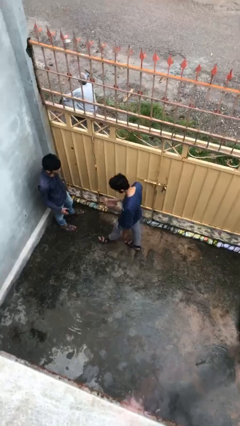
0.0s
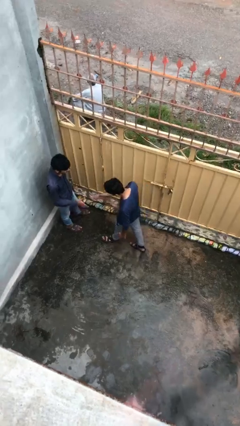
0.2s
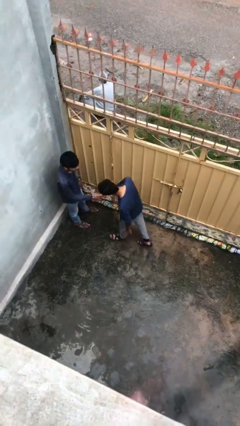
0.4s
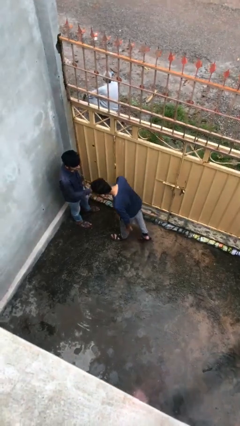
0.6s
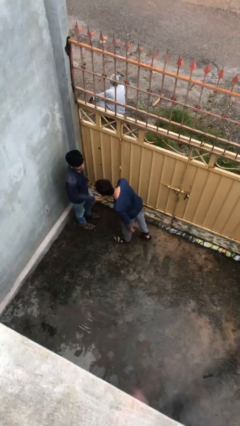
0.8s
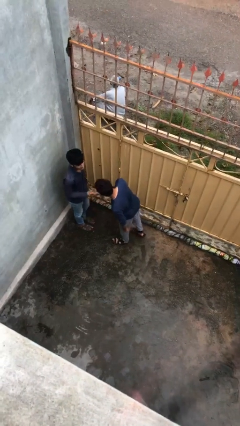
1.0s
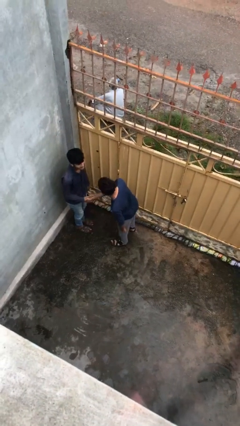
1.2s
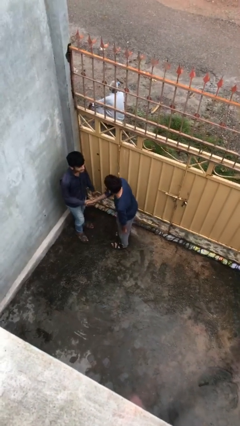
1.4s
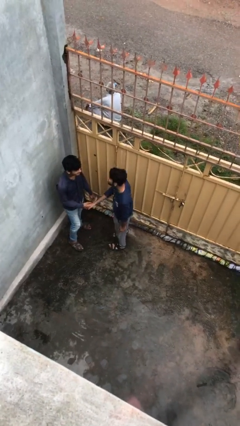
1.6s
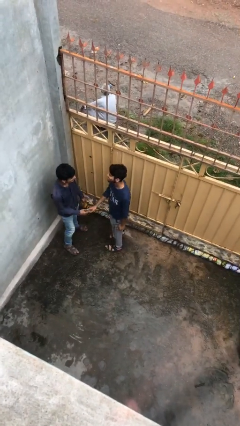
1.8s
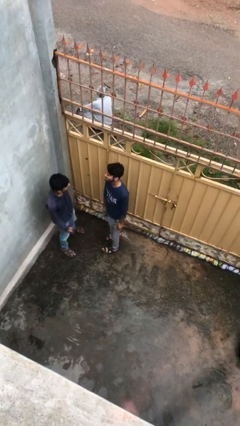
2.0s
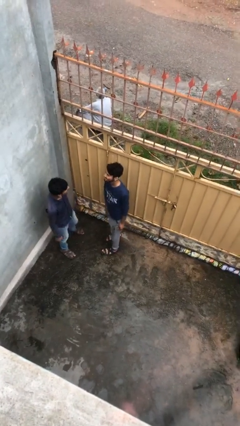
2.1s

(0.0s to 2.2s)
person shakes hand

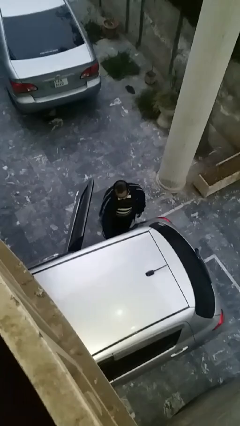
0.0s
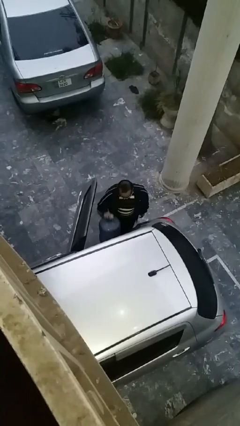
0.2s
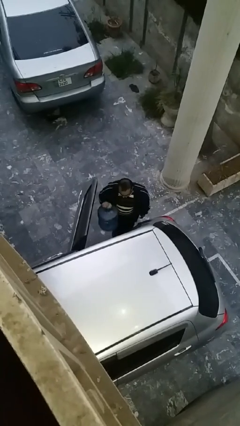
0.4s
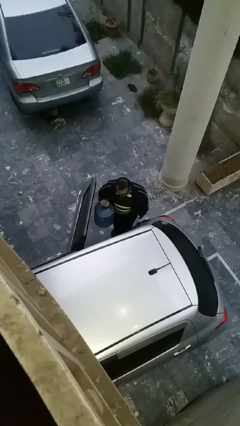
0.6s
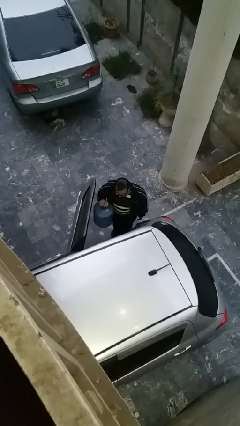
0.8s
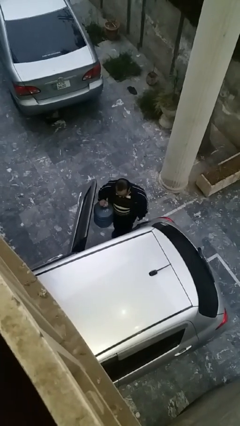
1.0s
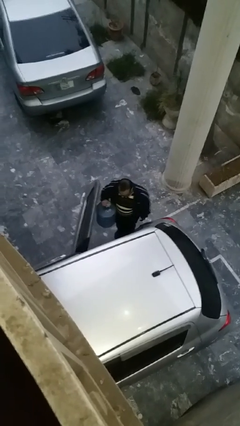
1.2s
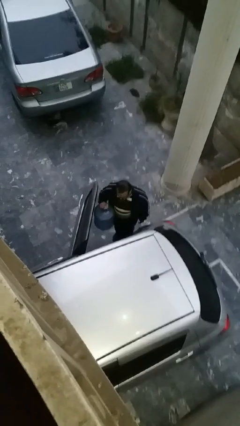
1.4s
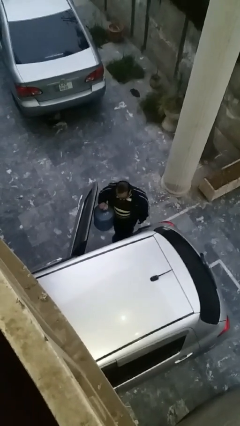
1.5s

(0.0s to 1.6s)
person unloads car

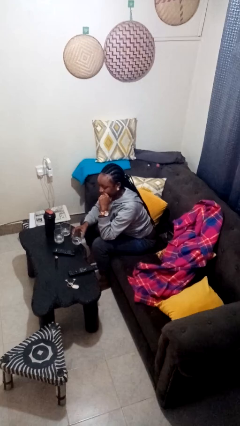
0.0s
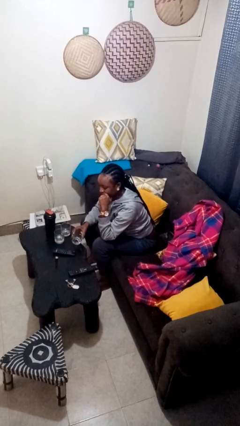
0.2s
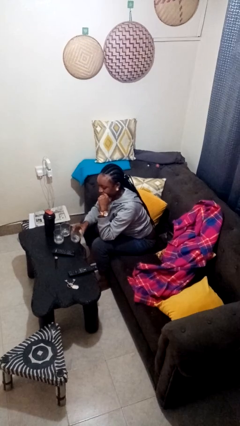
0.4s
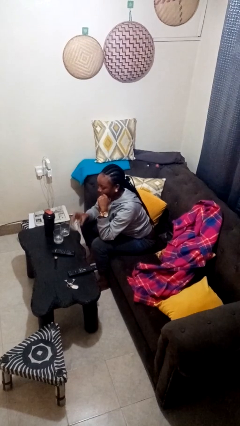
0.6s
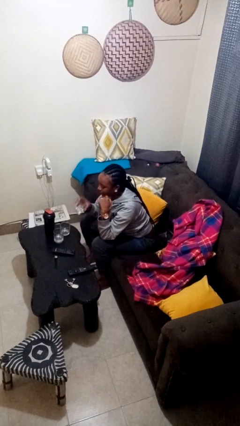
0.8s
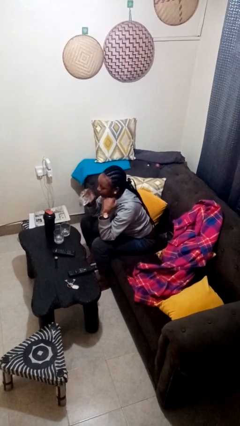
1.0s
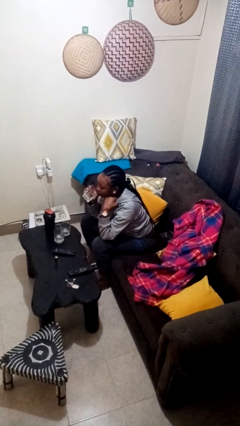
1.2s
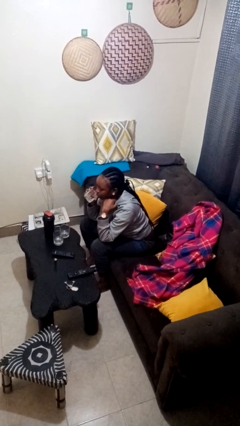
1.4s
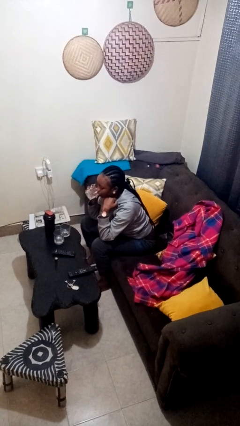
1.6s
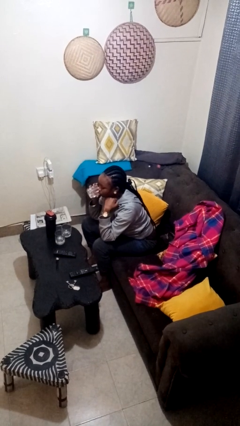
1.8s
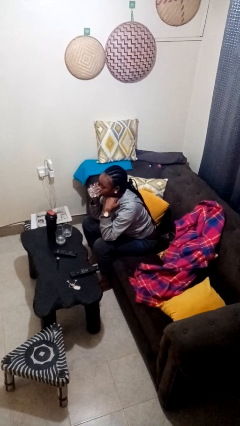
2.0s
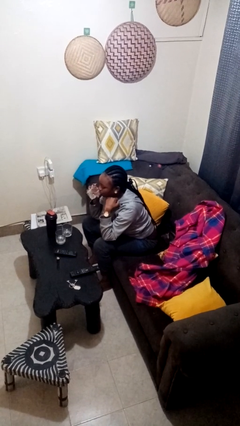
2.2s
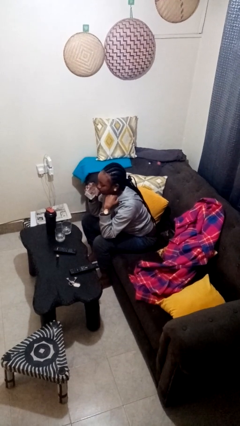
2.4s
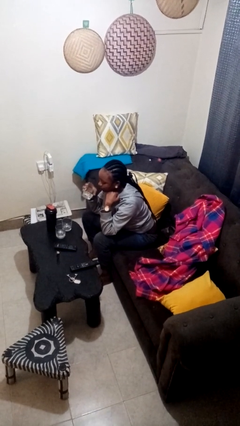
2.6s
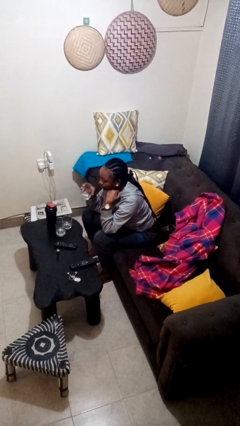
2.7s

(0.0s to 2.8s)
person drinks from shotglass

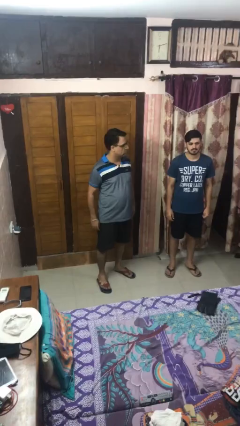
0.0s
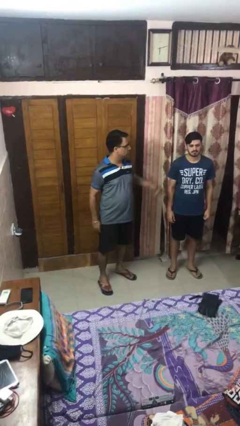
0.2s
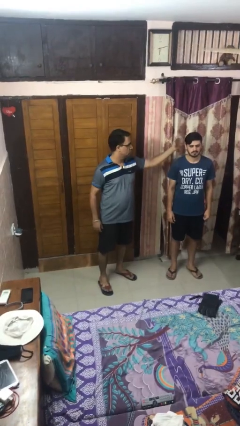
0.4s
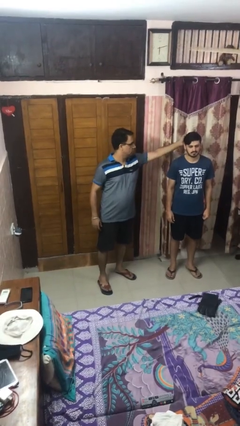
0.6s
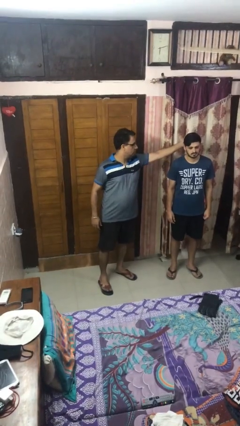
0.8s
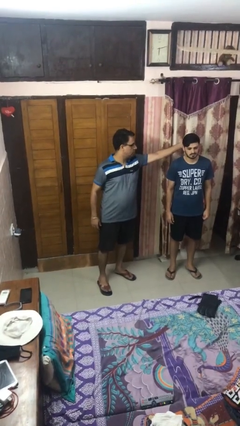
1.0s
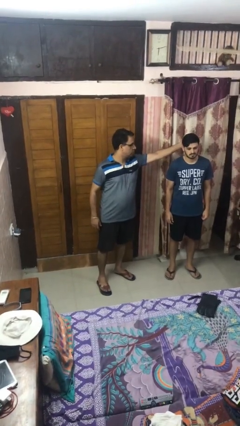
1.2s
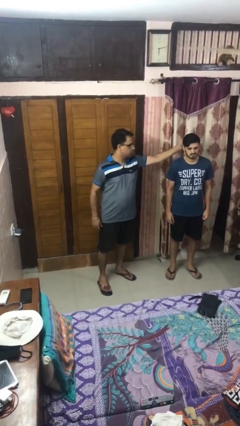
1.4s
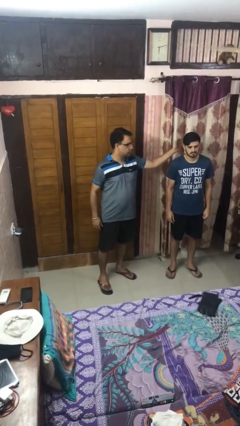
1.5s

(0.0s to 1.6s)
person grabs person by hair

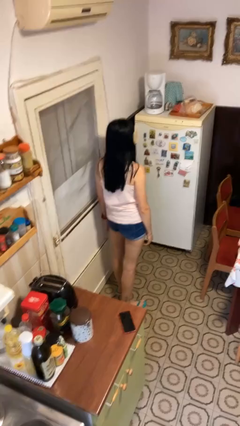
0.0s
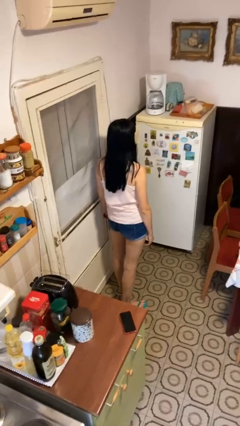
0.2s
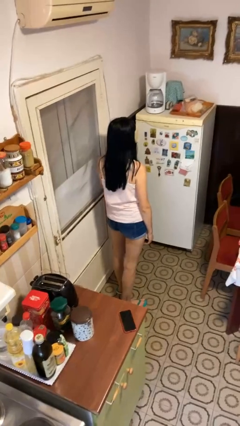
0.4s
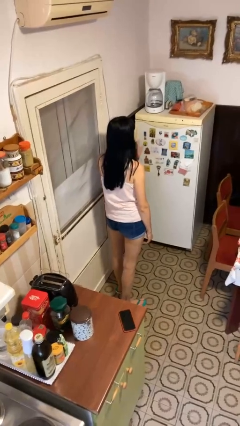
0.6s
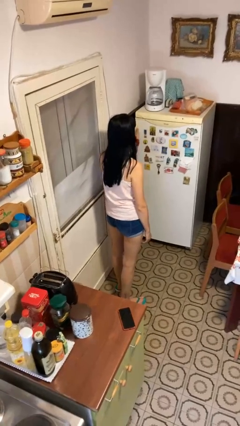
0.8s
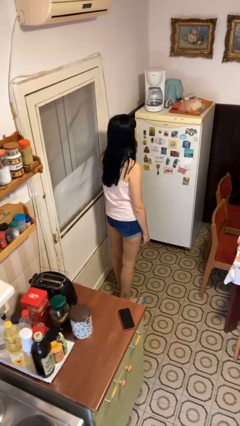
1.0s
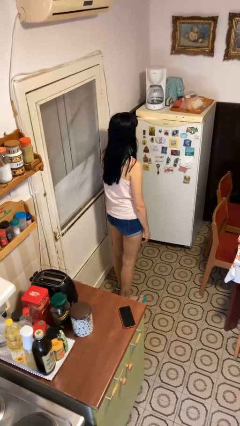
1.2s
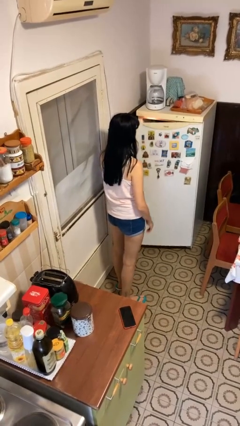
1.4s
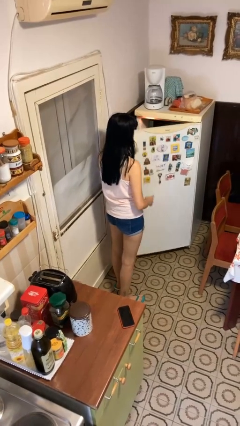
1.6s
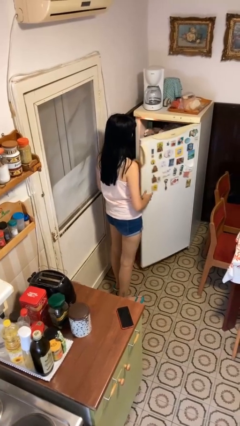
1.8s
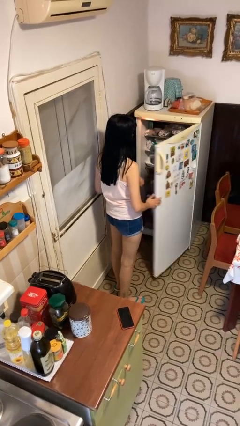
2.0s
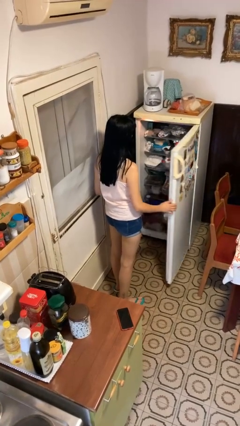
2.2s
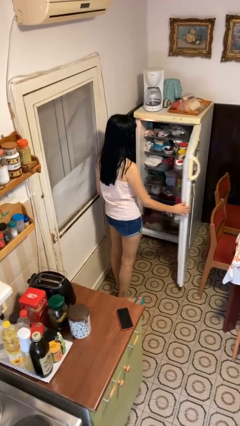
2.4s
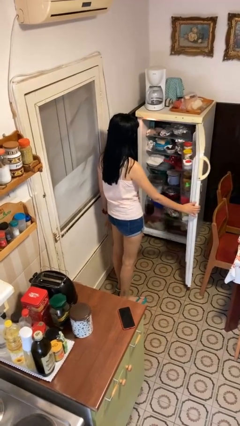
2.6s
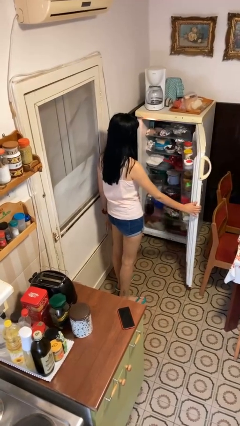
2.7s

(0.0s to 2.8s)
person opens refrigerator

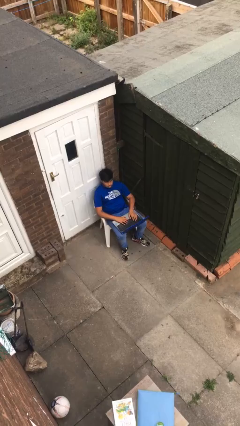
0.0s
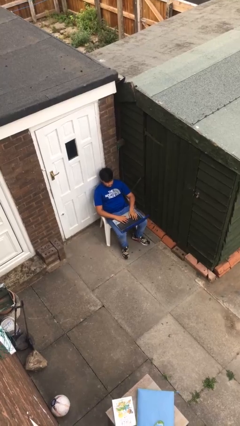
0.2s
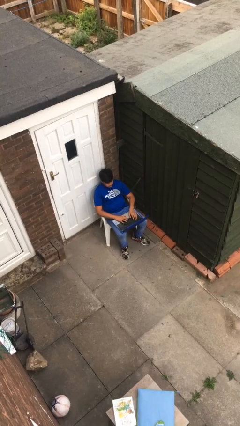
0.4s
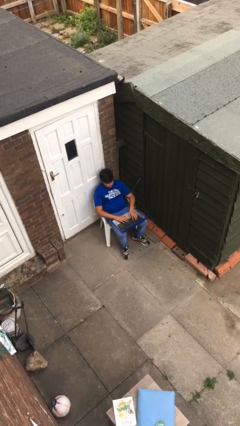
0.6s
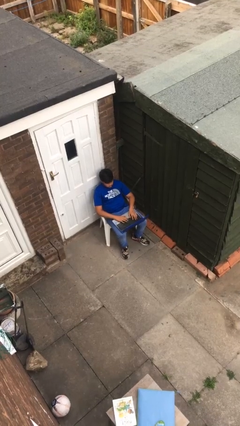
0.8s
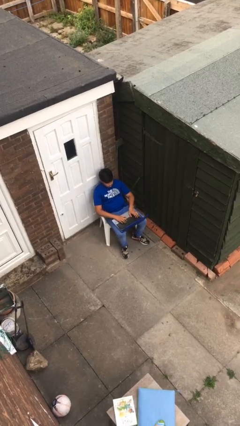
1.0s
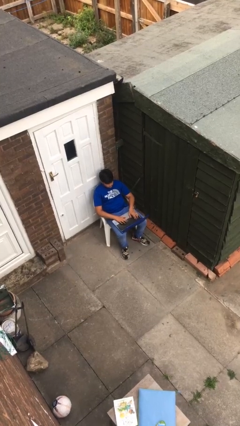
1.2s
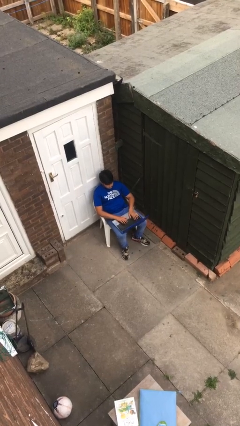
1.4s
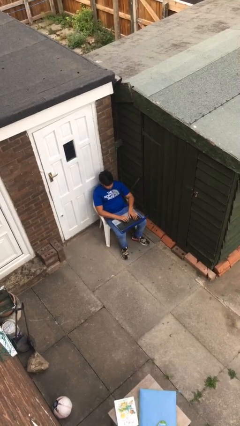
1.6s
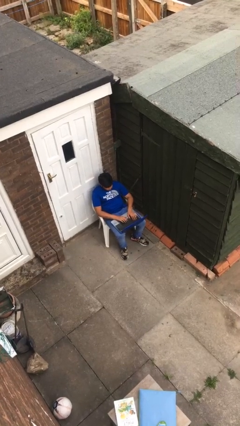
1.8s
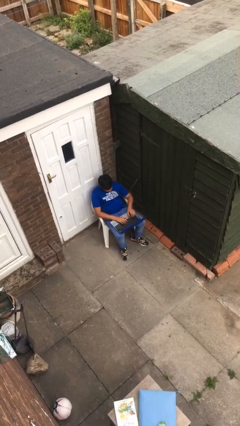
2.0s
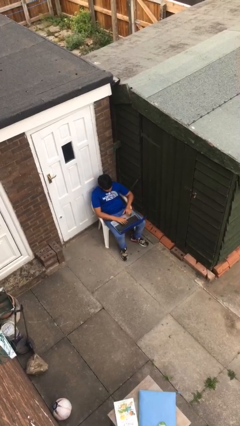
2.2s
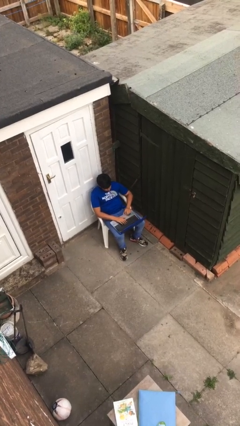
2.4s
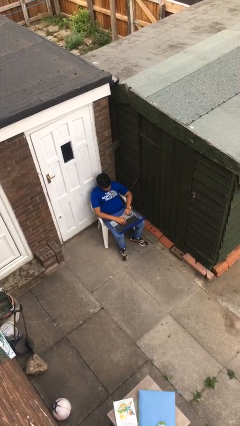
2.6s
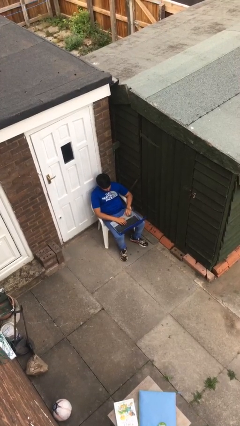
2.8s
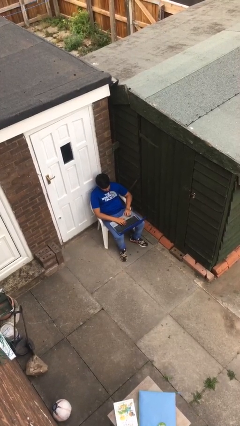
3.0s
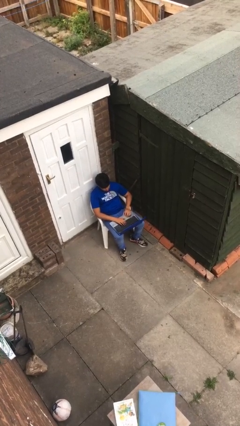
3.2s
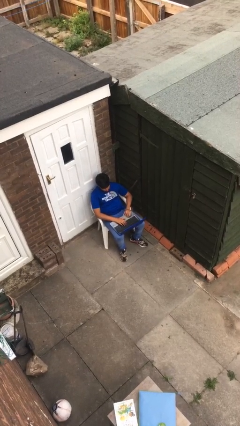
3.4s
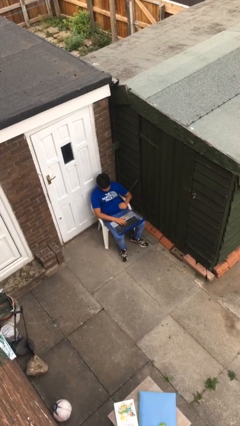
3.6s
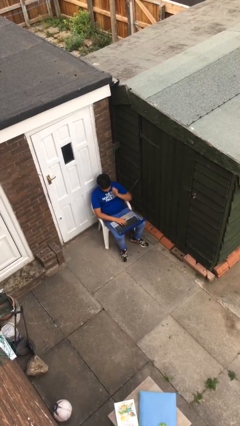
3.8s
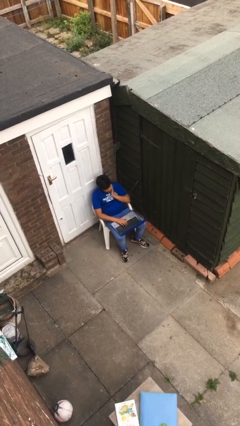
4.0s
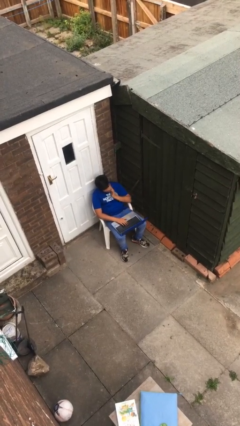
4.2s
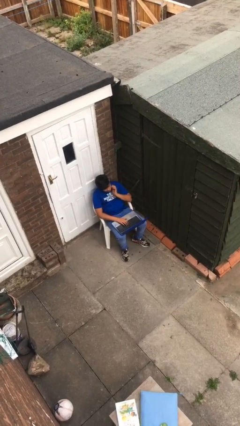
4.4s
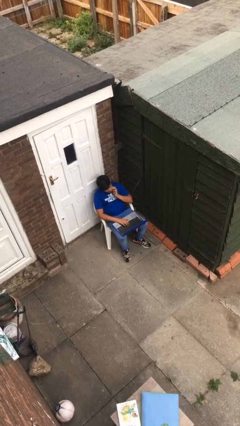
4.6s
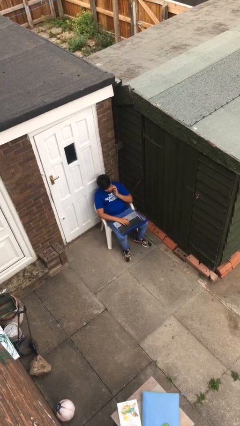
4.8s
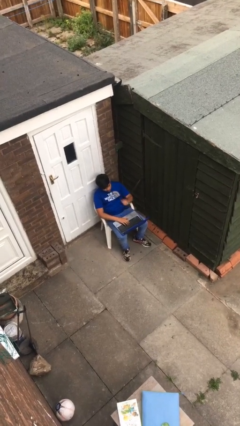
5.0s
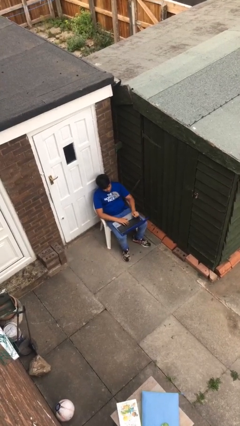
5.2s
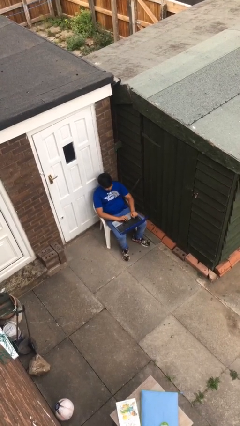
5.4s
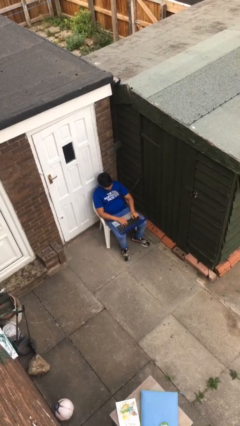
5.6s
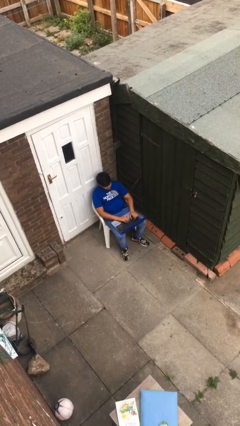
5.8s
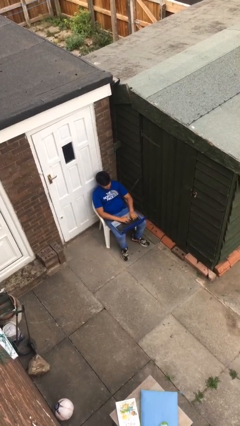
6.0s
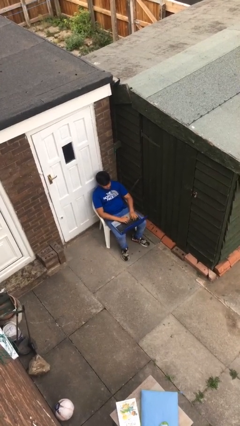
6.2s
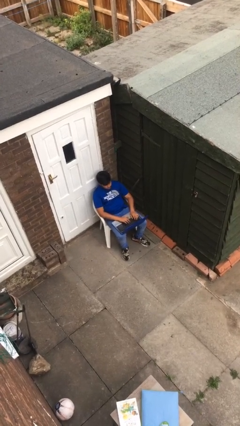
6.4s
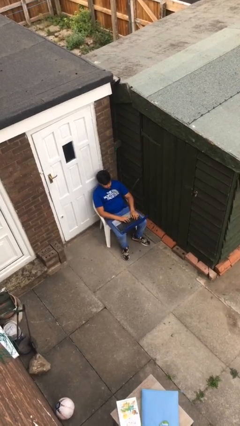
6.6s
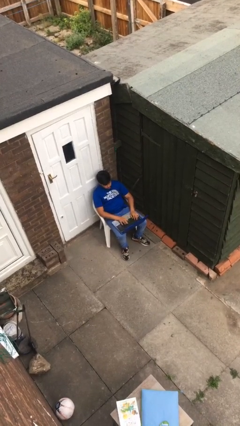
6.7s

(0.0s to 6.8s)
person interacts with laptop
